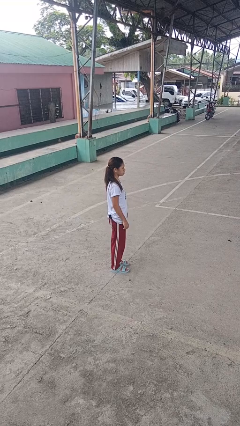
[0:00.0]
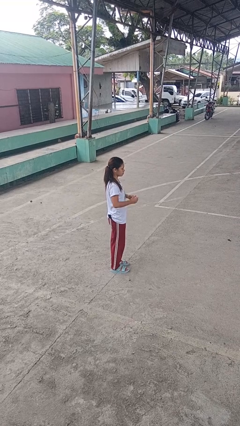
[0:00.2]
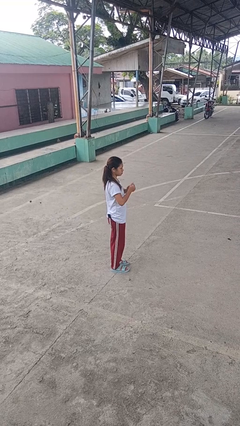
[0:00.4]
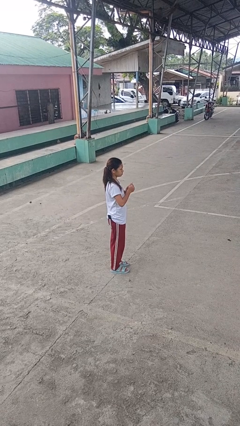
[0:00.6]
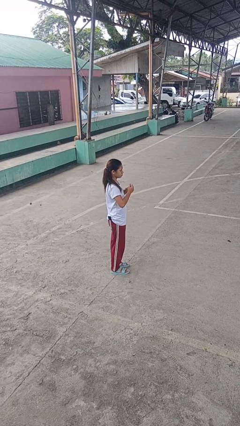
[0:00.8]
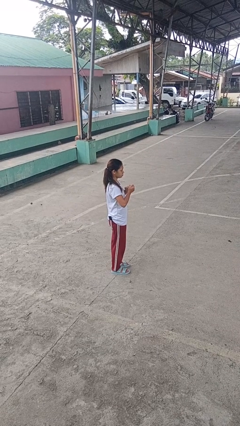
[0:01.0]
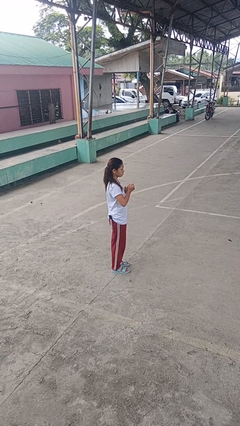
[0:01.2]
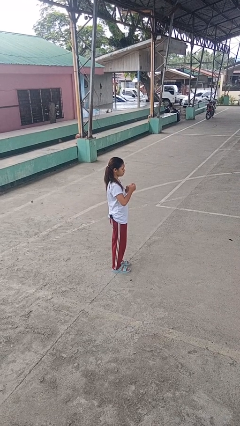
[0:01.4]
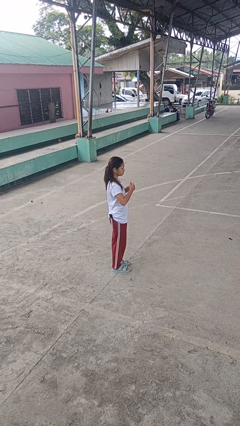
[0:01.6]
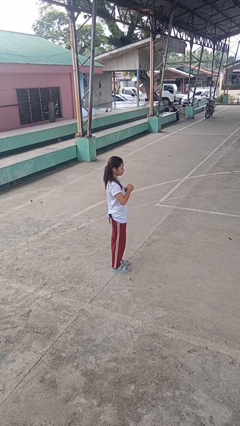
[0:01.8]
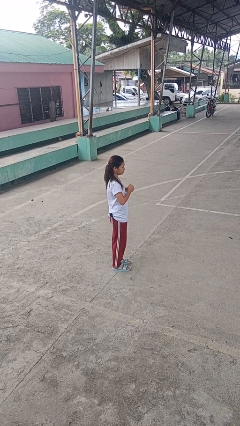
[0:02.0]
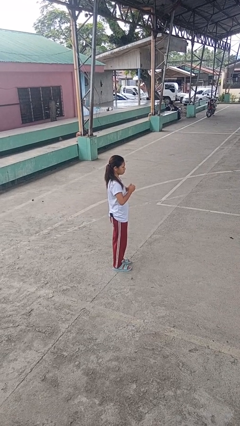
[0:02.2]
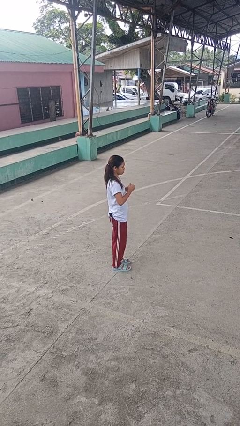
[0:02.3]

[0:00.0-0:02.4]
person cracks knuckles

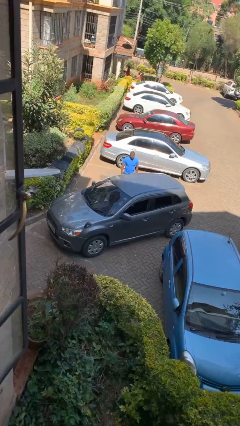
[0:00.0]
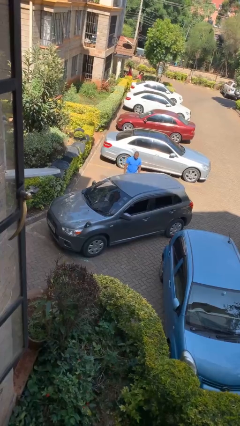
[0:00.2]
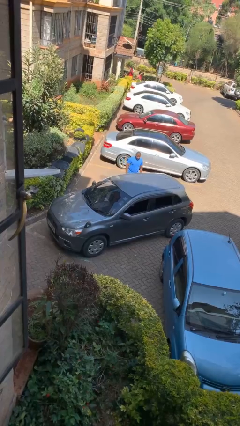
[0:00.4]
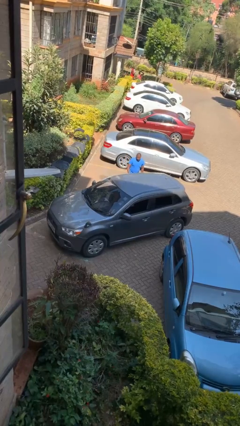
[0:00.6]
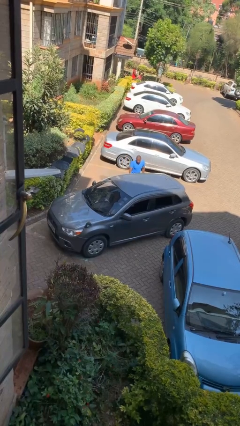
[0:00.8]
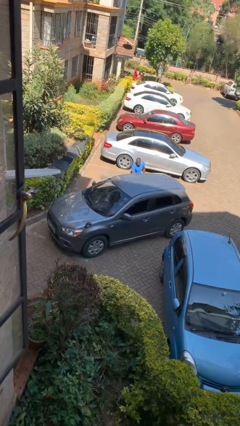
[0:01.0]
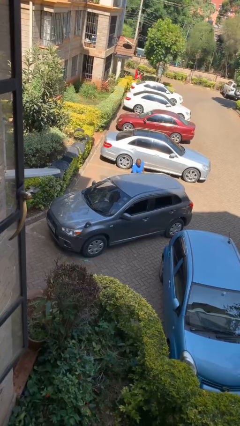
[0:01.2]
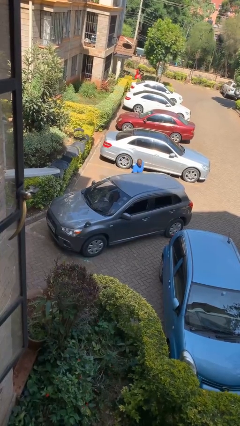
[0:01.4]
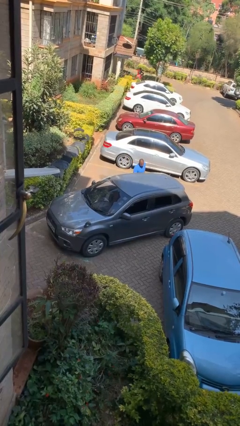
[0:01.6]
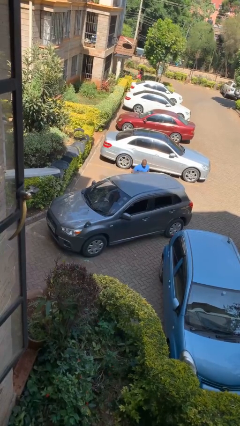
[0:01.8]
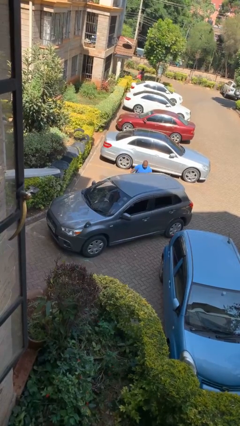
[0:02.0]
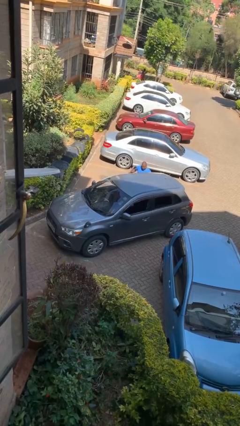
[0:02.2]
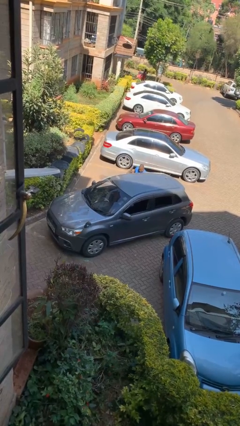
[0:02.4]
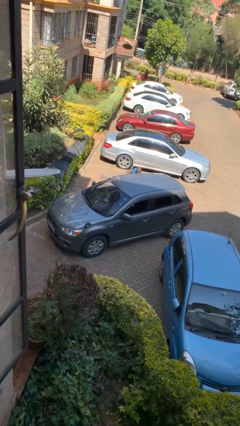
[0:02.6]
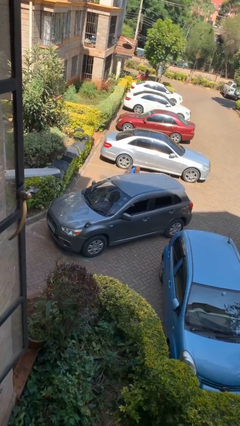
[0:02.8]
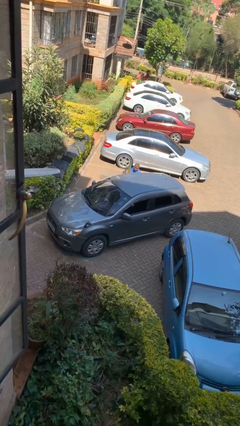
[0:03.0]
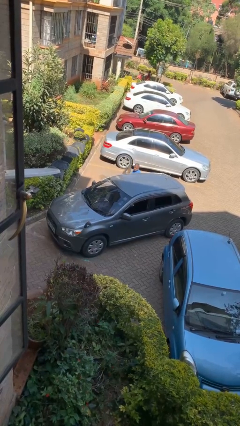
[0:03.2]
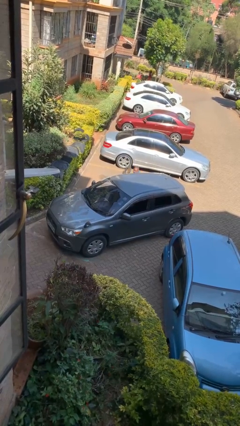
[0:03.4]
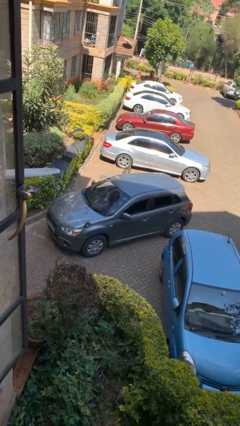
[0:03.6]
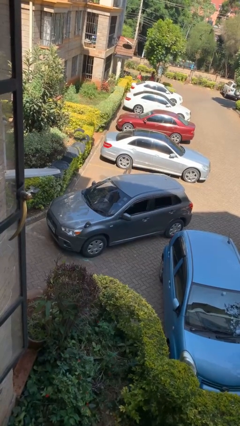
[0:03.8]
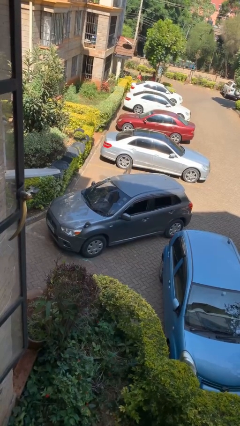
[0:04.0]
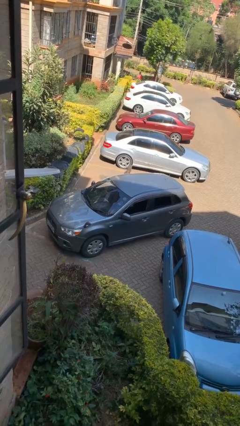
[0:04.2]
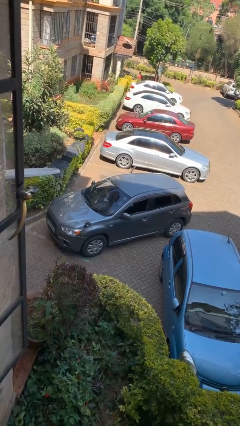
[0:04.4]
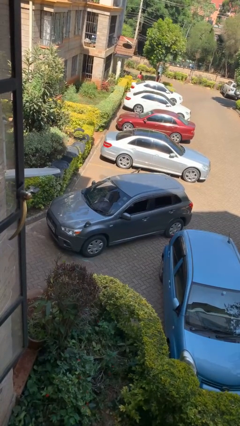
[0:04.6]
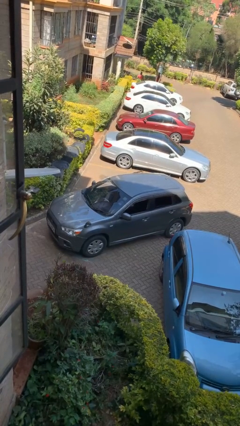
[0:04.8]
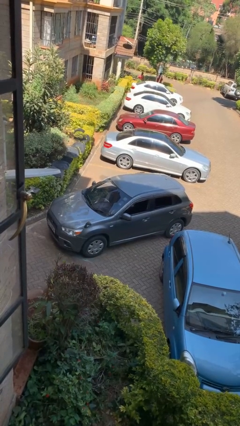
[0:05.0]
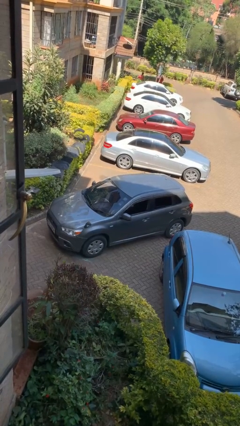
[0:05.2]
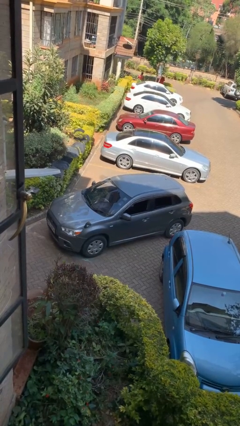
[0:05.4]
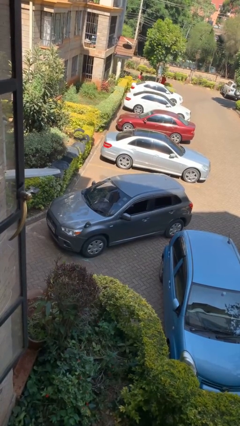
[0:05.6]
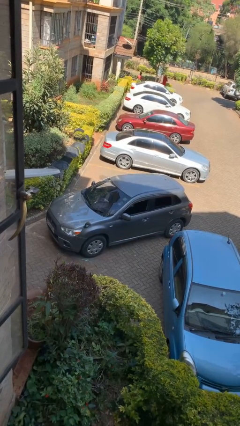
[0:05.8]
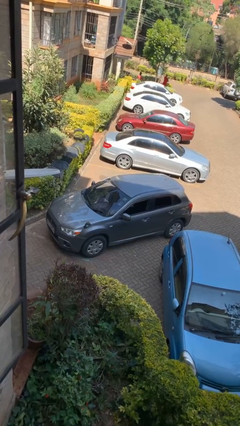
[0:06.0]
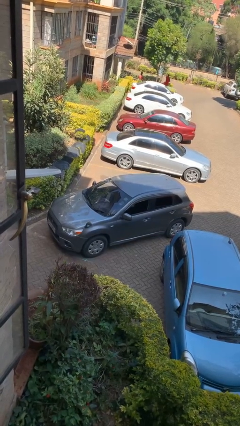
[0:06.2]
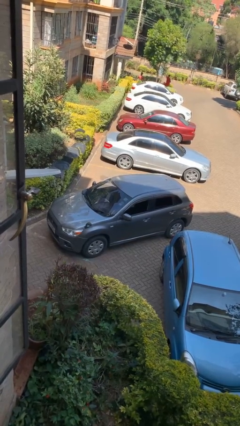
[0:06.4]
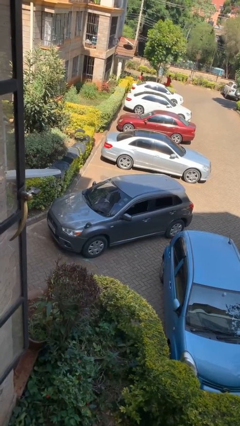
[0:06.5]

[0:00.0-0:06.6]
car picks up person

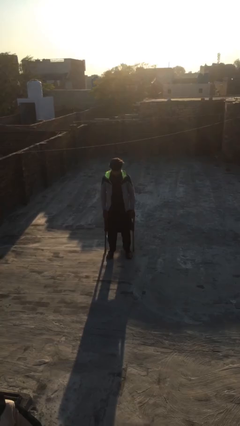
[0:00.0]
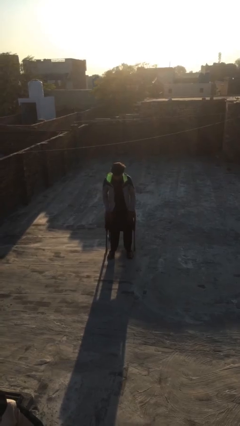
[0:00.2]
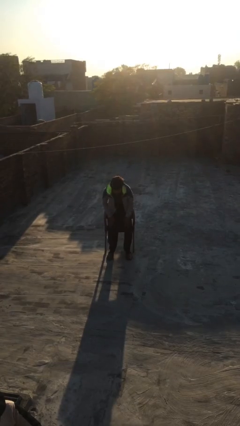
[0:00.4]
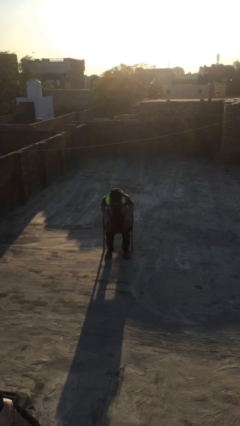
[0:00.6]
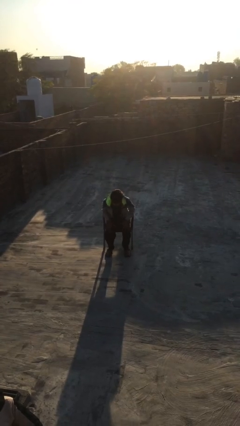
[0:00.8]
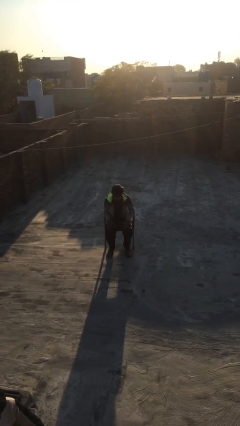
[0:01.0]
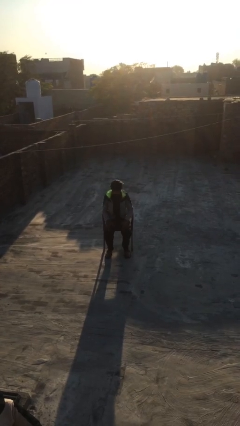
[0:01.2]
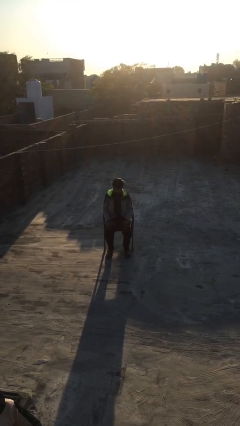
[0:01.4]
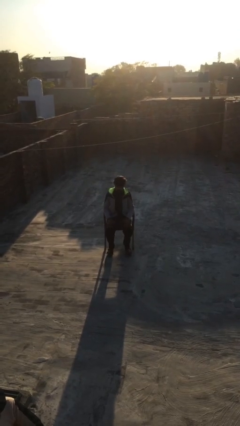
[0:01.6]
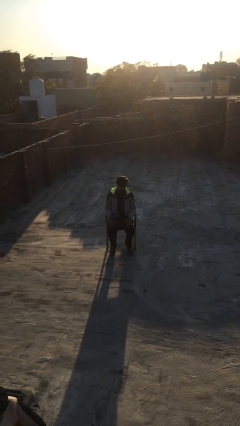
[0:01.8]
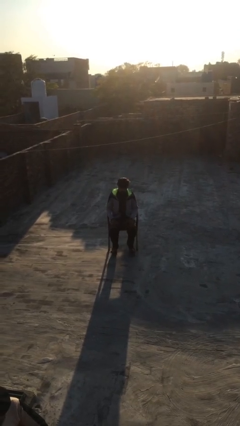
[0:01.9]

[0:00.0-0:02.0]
person sits down

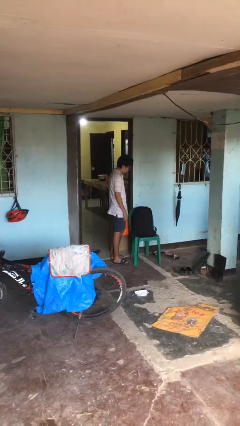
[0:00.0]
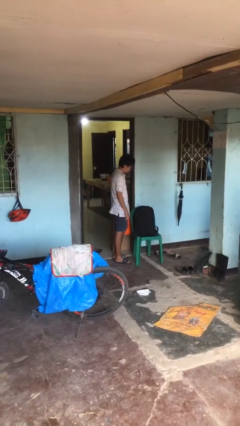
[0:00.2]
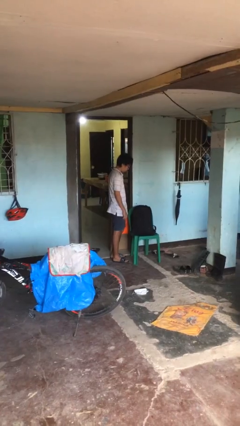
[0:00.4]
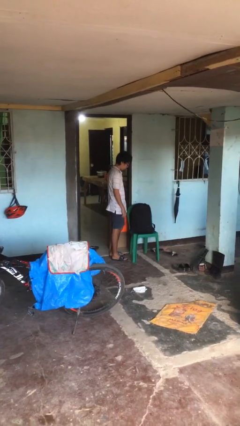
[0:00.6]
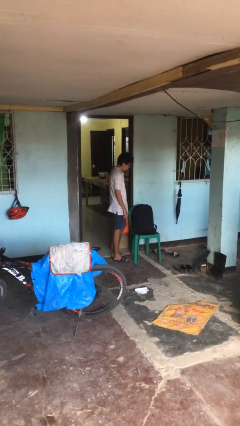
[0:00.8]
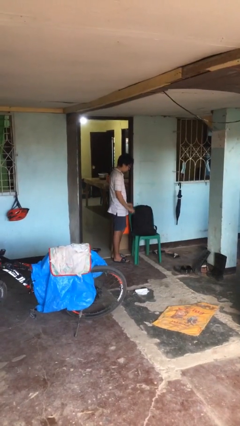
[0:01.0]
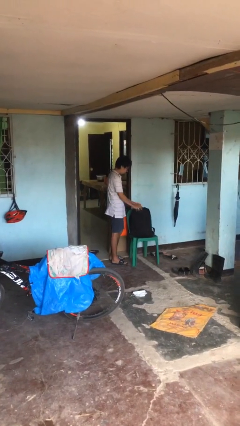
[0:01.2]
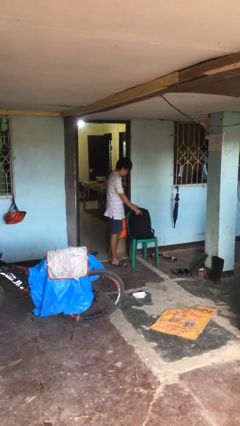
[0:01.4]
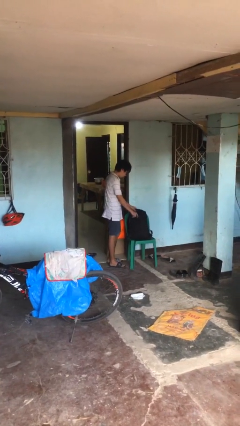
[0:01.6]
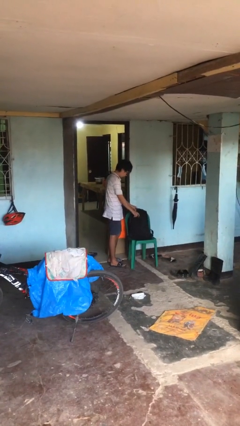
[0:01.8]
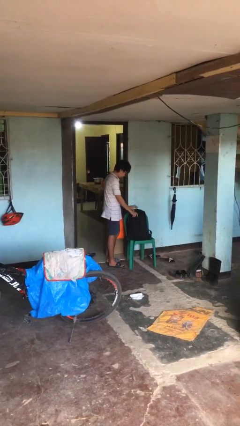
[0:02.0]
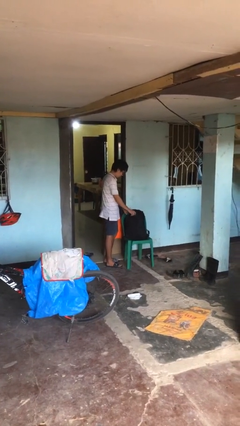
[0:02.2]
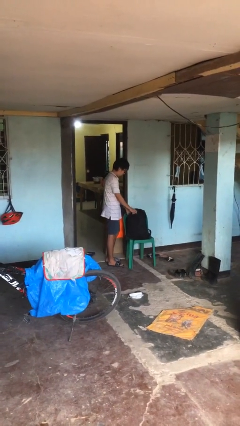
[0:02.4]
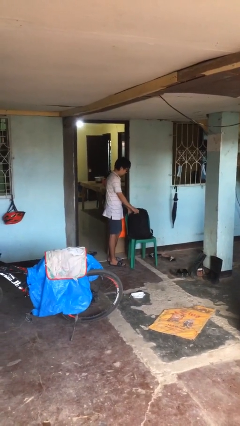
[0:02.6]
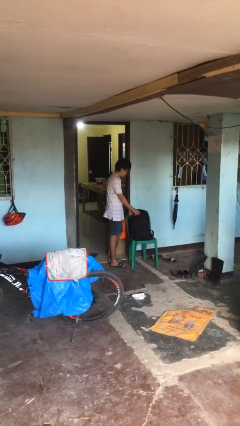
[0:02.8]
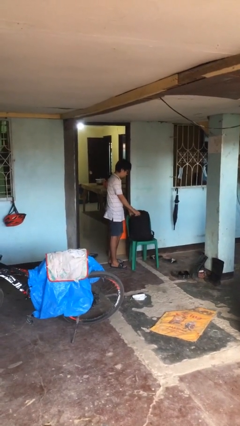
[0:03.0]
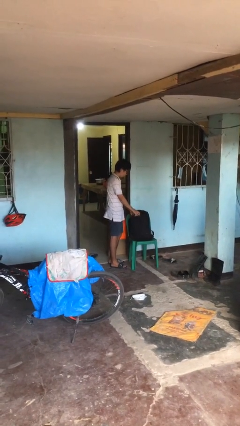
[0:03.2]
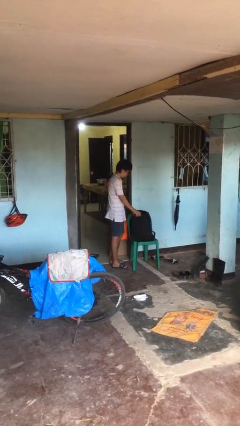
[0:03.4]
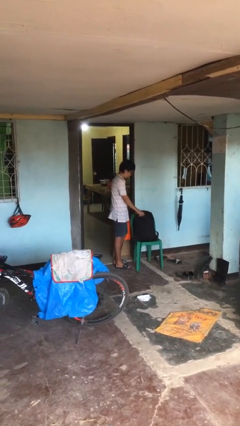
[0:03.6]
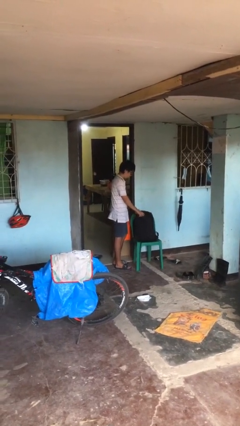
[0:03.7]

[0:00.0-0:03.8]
person searches in backpack

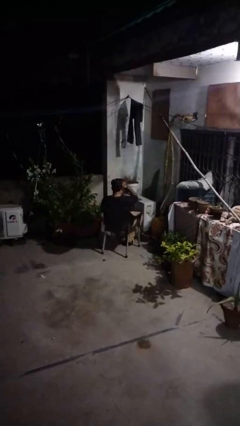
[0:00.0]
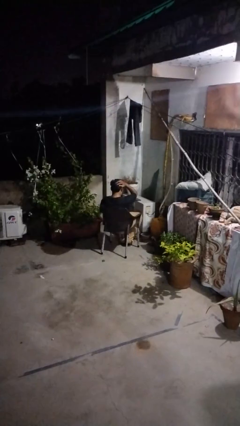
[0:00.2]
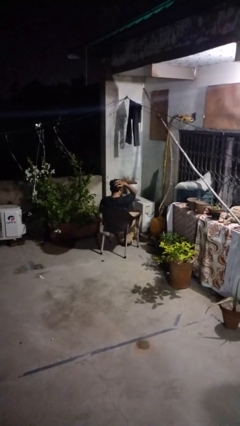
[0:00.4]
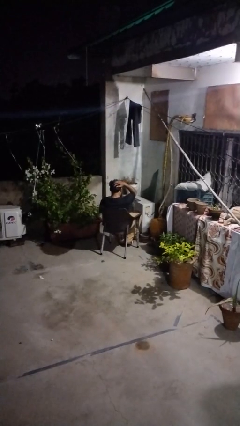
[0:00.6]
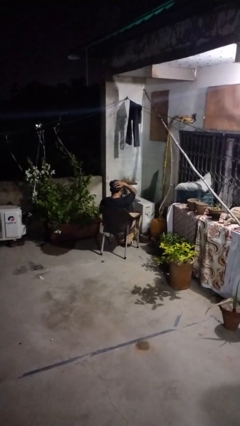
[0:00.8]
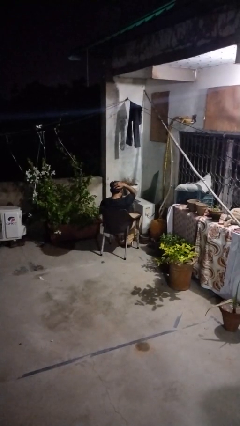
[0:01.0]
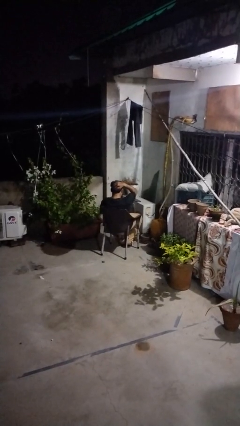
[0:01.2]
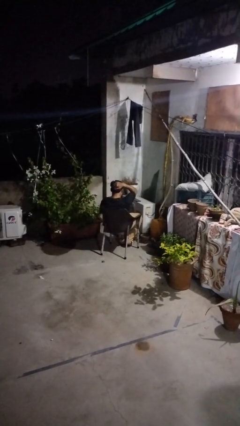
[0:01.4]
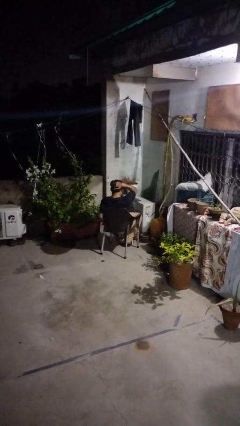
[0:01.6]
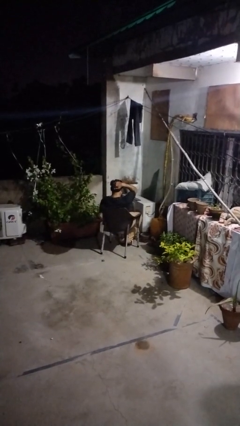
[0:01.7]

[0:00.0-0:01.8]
person strokes hair

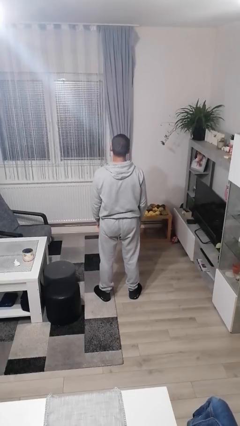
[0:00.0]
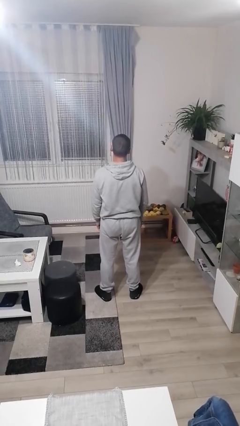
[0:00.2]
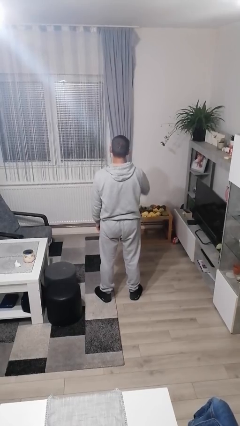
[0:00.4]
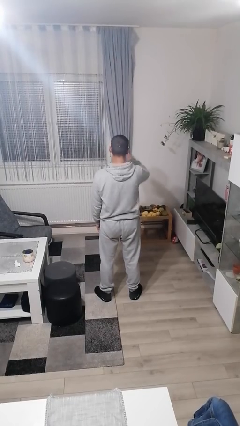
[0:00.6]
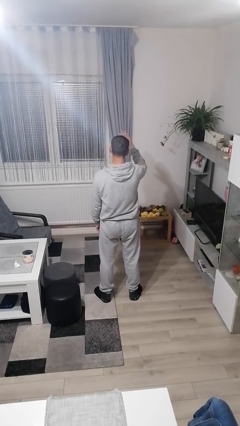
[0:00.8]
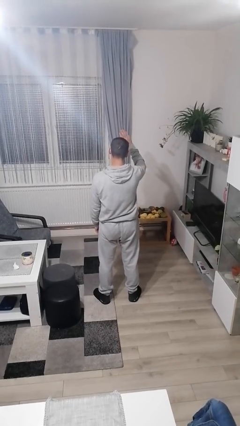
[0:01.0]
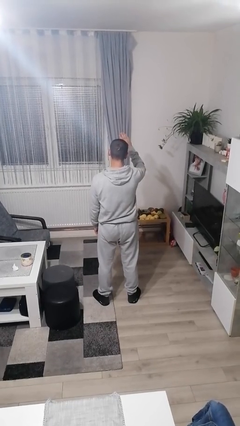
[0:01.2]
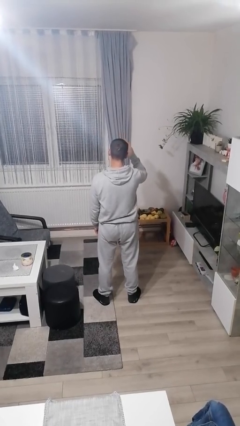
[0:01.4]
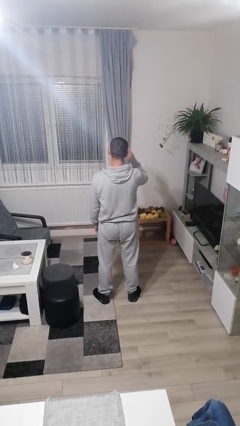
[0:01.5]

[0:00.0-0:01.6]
person salutes
